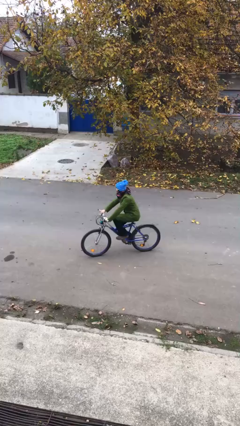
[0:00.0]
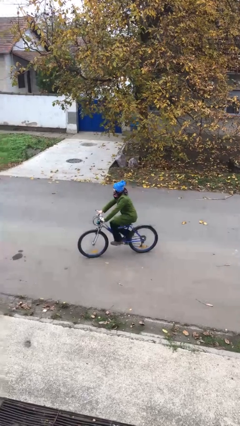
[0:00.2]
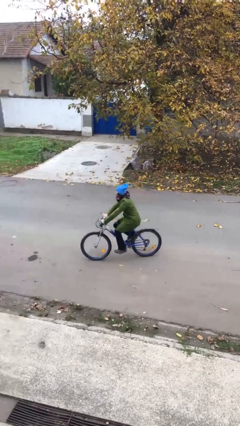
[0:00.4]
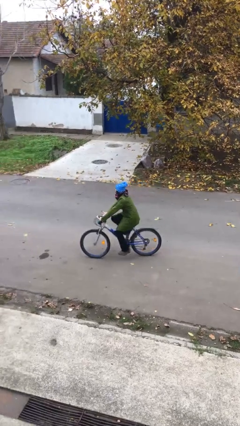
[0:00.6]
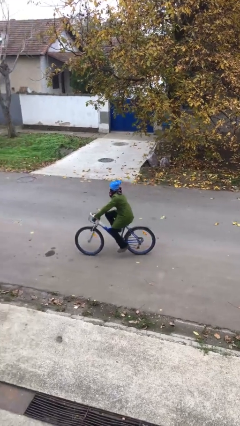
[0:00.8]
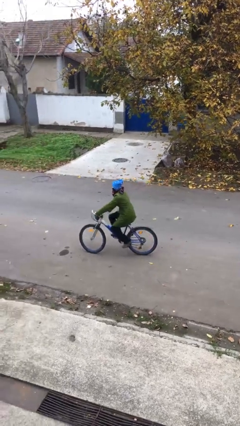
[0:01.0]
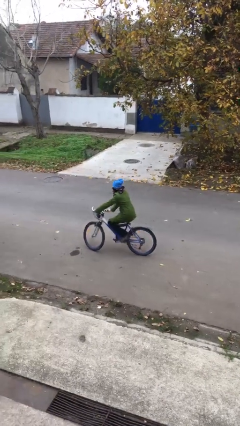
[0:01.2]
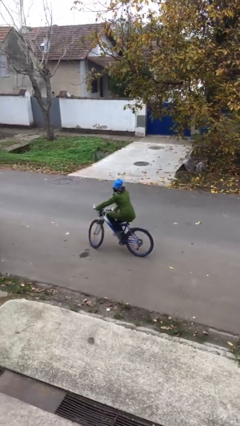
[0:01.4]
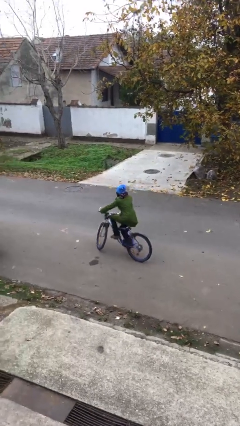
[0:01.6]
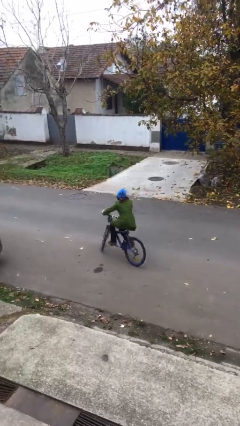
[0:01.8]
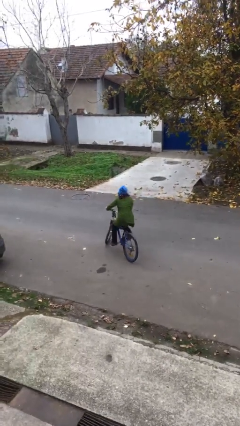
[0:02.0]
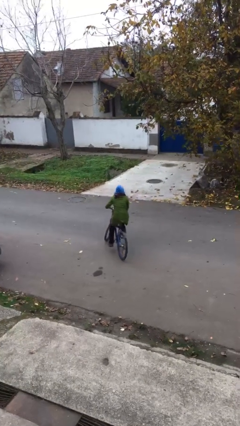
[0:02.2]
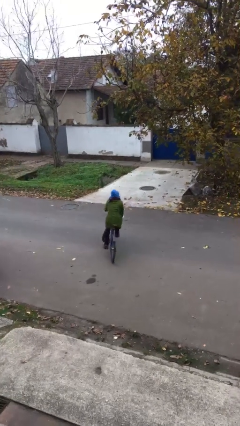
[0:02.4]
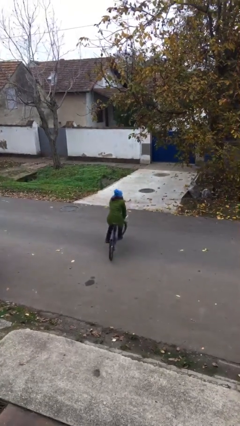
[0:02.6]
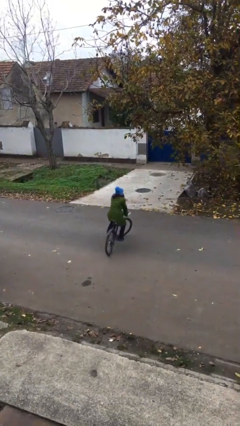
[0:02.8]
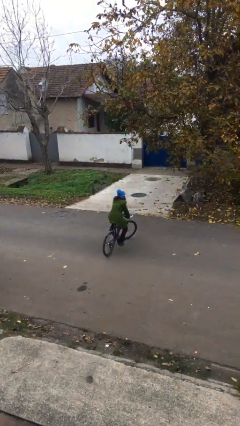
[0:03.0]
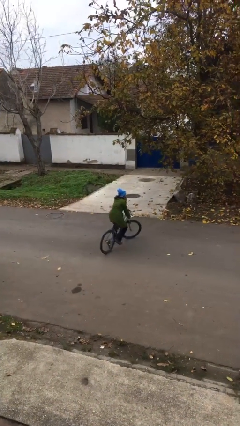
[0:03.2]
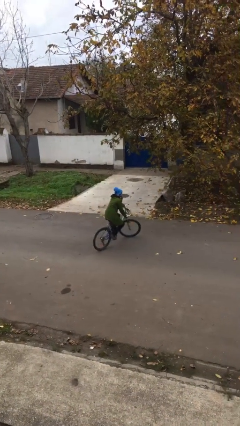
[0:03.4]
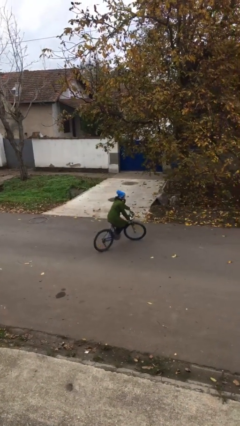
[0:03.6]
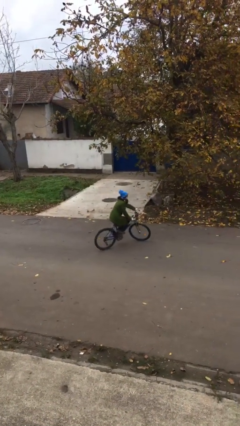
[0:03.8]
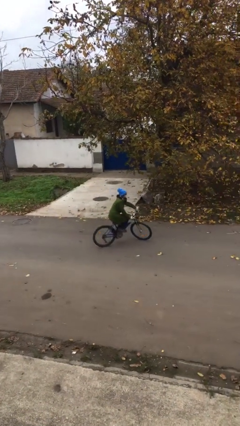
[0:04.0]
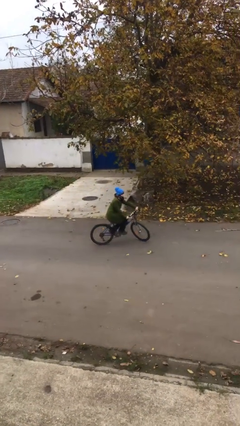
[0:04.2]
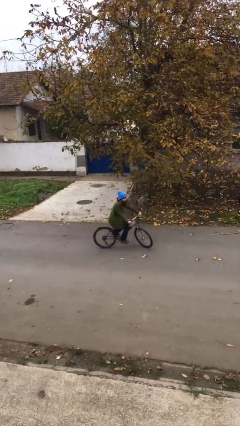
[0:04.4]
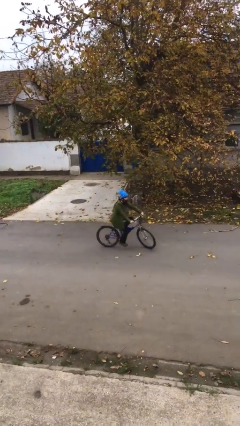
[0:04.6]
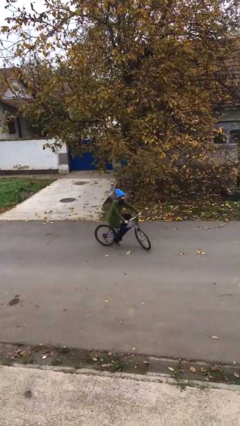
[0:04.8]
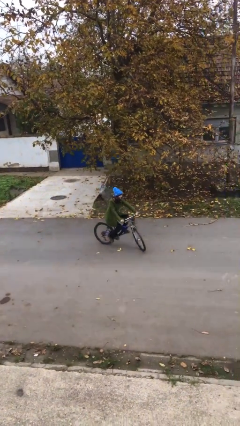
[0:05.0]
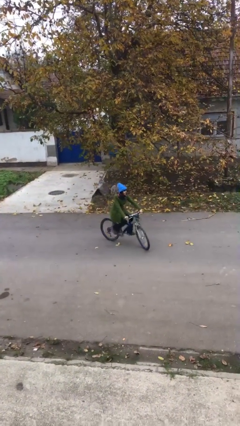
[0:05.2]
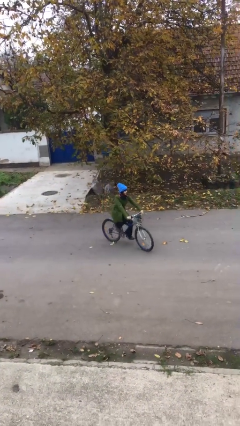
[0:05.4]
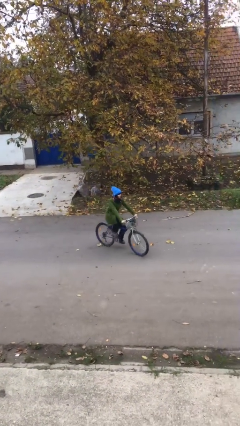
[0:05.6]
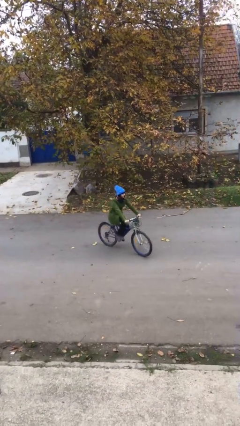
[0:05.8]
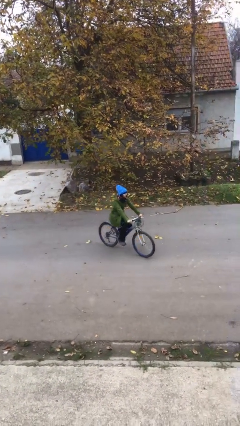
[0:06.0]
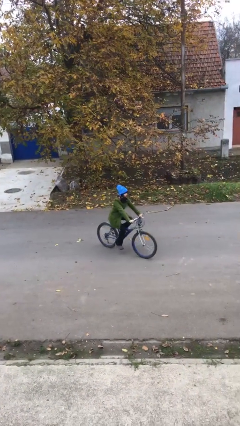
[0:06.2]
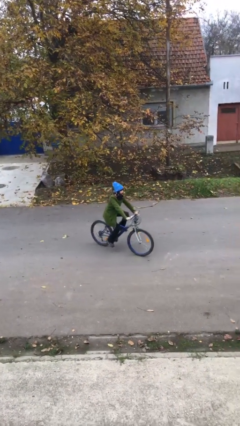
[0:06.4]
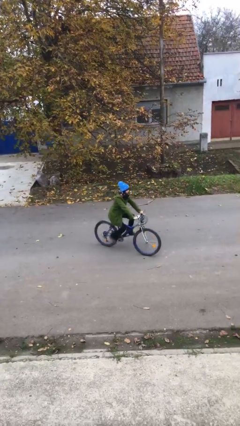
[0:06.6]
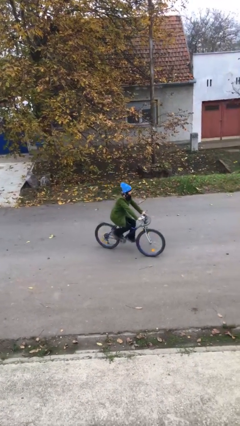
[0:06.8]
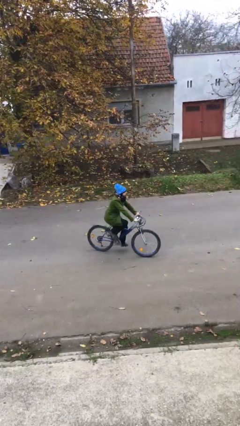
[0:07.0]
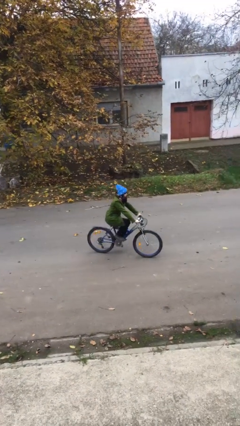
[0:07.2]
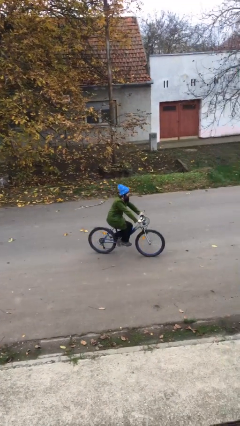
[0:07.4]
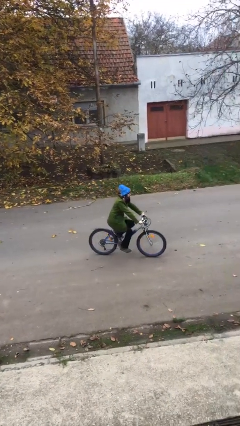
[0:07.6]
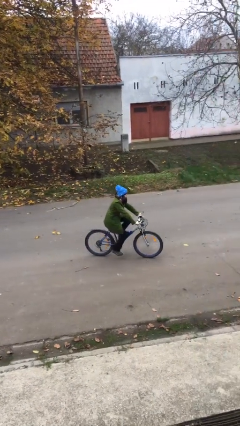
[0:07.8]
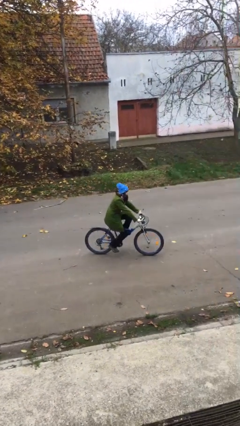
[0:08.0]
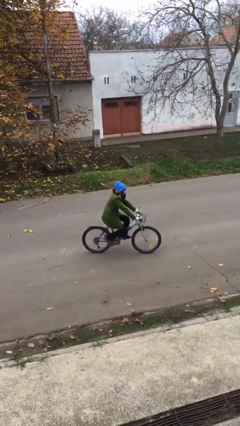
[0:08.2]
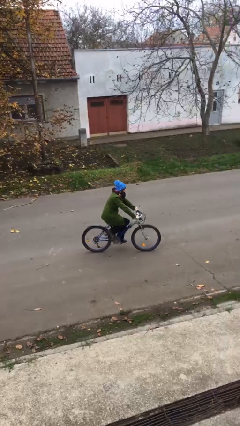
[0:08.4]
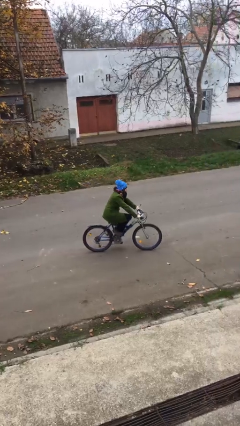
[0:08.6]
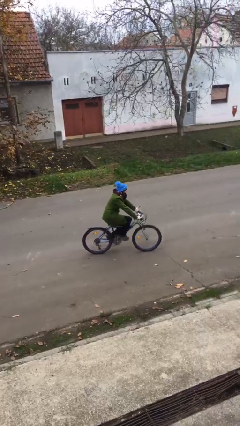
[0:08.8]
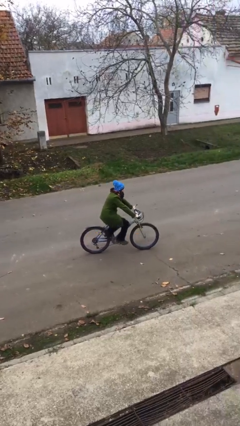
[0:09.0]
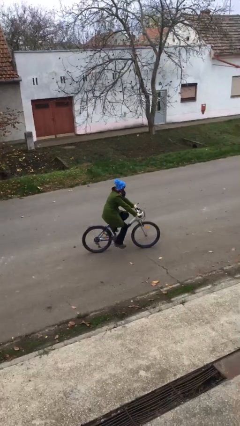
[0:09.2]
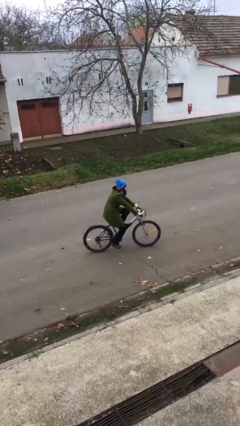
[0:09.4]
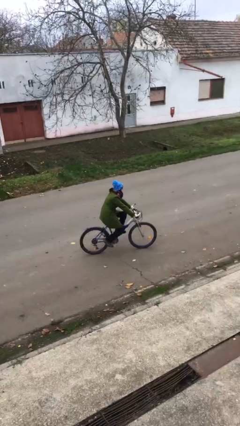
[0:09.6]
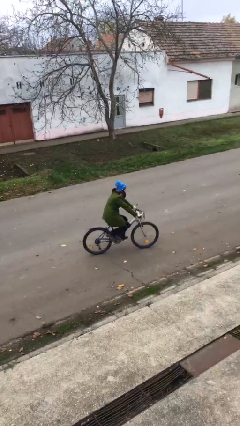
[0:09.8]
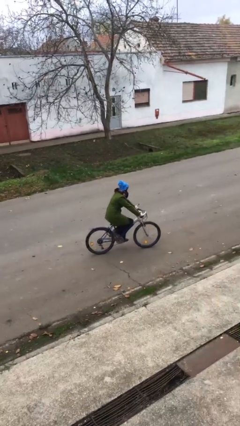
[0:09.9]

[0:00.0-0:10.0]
person rides bicycle

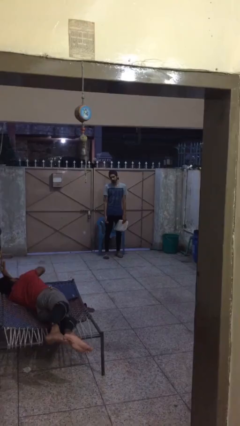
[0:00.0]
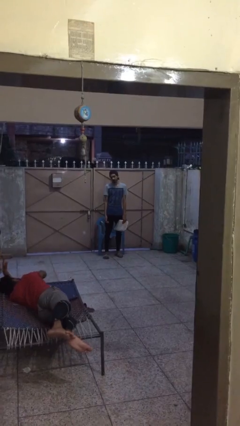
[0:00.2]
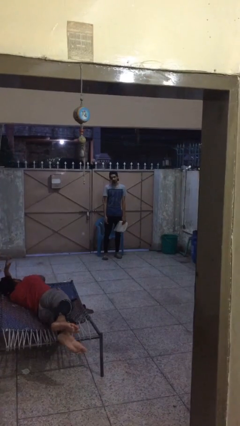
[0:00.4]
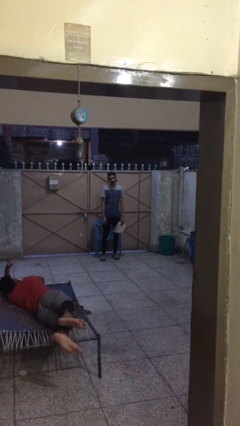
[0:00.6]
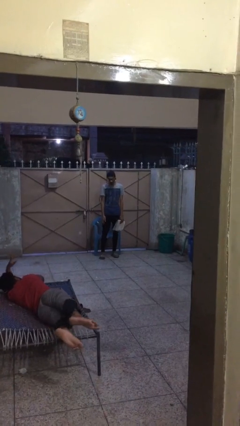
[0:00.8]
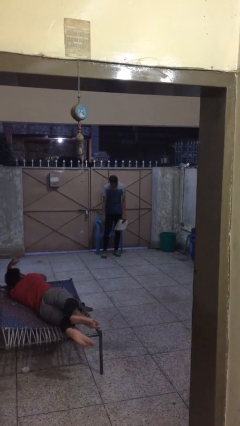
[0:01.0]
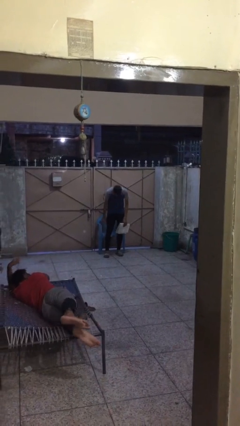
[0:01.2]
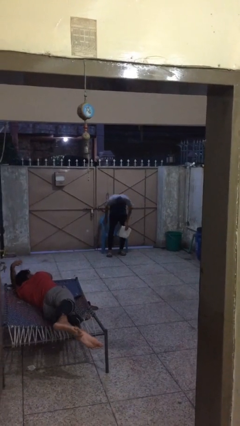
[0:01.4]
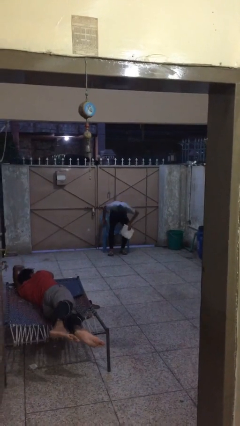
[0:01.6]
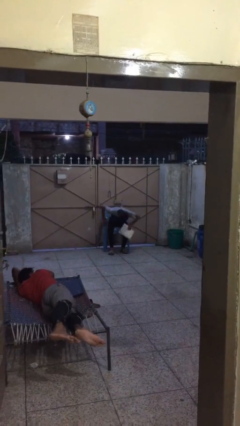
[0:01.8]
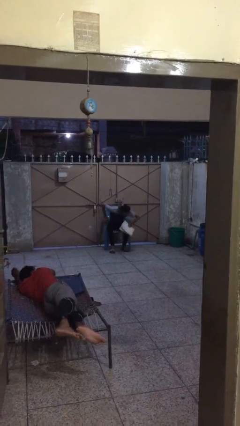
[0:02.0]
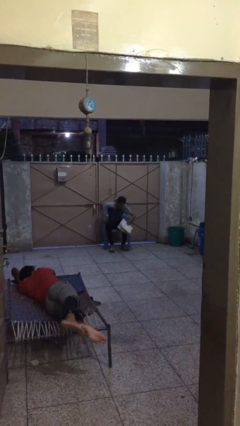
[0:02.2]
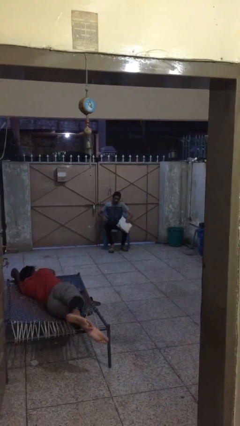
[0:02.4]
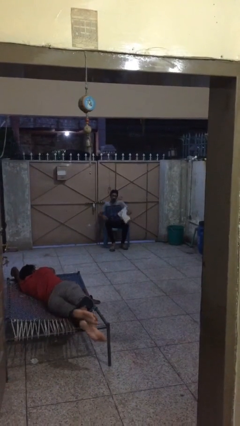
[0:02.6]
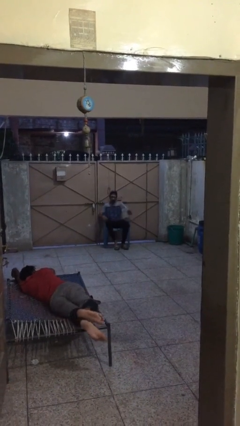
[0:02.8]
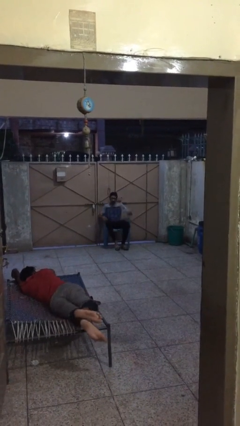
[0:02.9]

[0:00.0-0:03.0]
person sits down

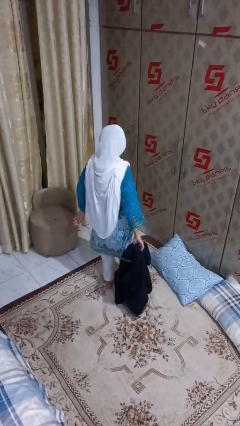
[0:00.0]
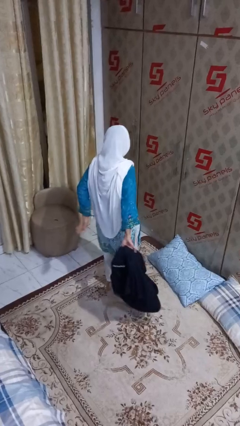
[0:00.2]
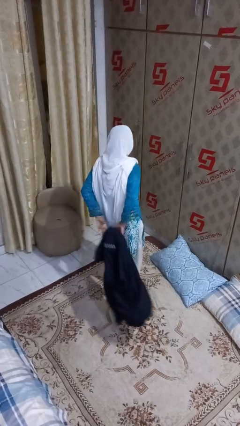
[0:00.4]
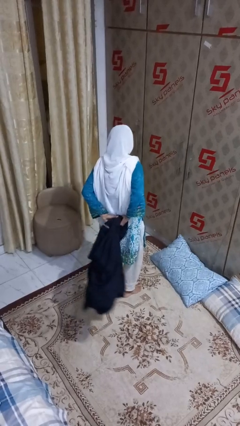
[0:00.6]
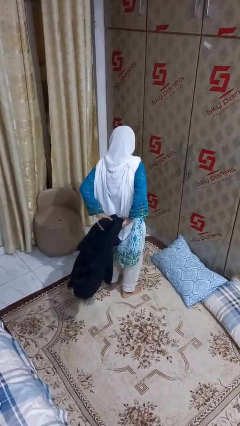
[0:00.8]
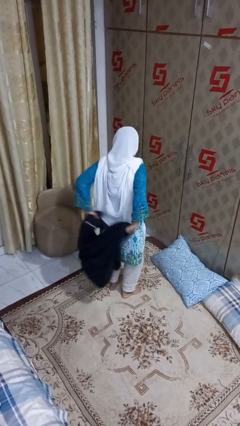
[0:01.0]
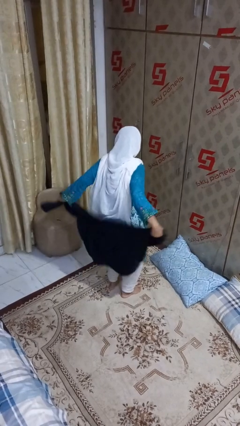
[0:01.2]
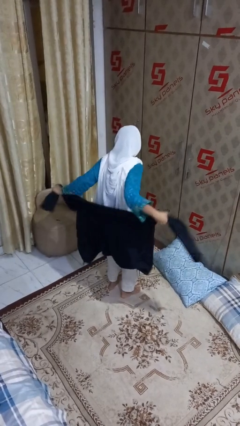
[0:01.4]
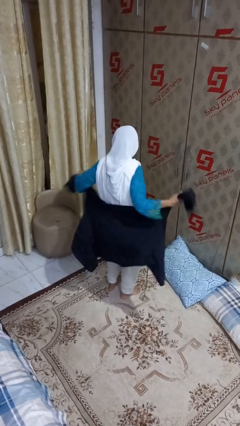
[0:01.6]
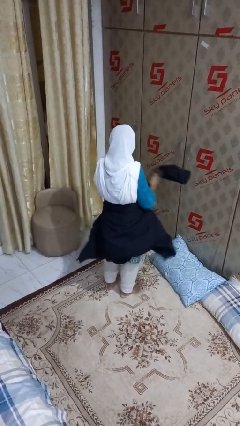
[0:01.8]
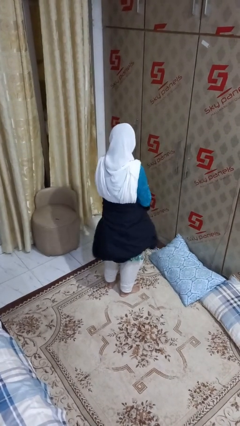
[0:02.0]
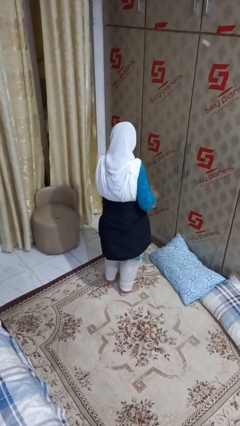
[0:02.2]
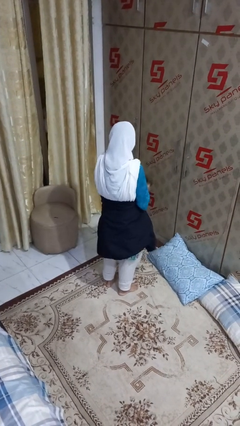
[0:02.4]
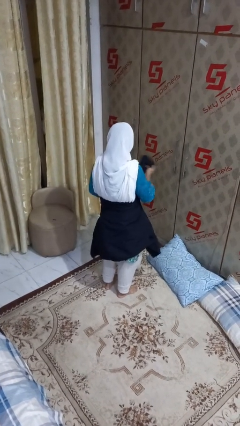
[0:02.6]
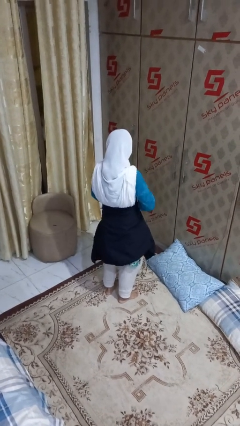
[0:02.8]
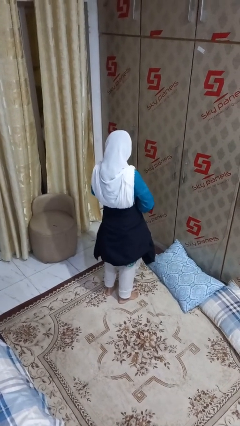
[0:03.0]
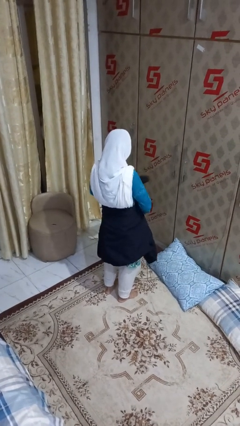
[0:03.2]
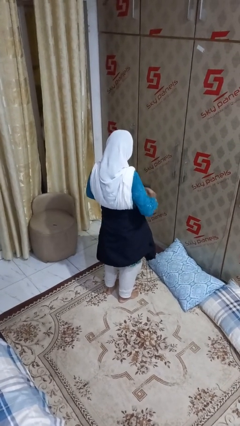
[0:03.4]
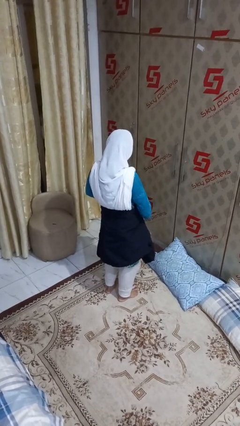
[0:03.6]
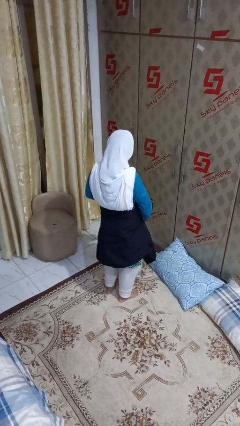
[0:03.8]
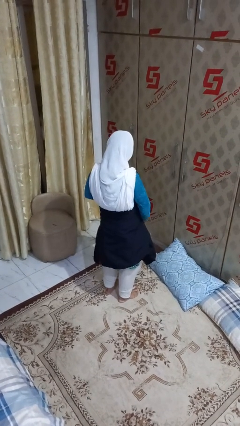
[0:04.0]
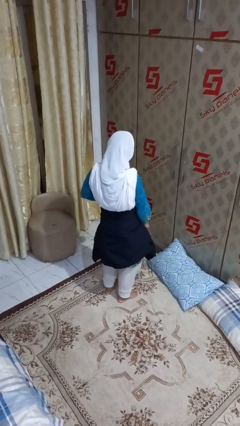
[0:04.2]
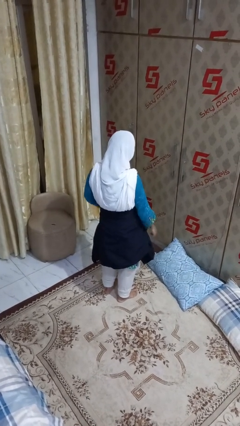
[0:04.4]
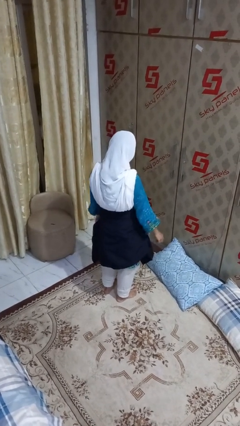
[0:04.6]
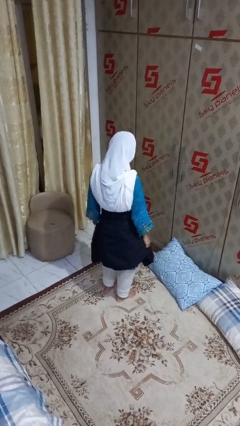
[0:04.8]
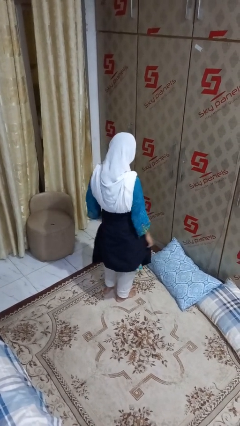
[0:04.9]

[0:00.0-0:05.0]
person ties jacket around waist
